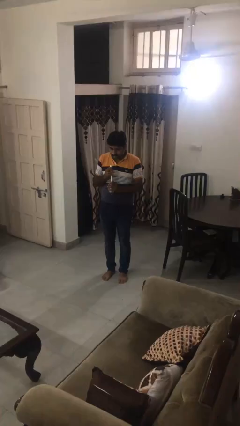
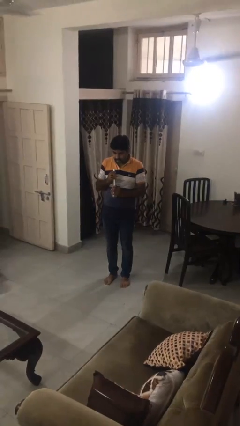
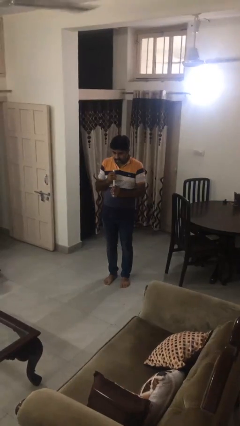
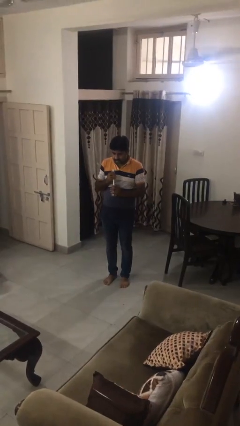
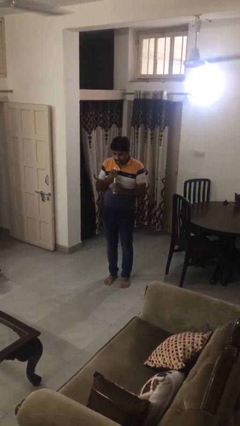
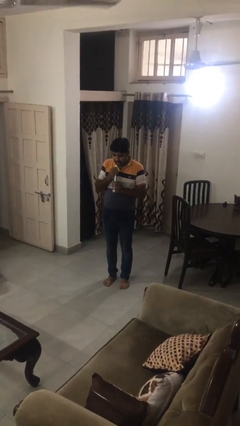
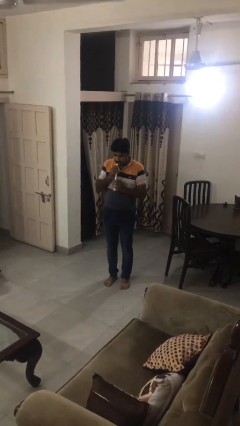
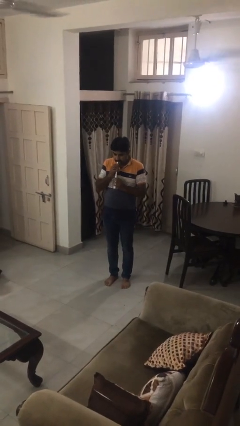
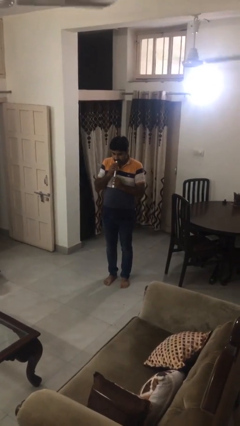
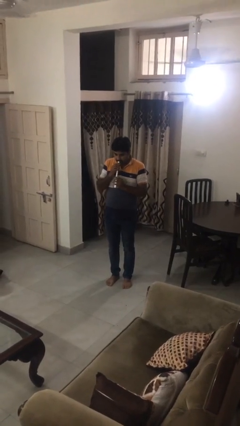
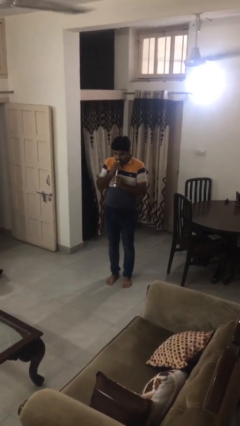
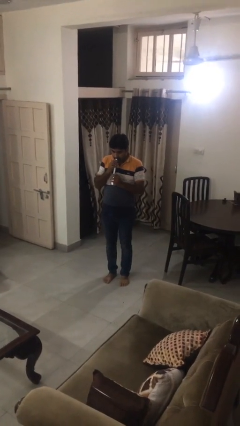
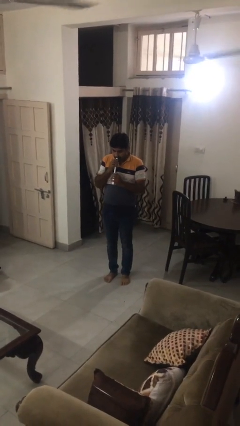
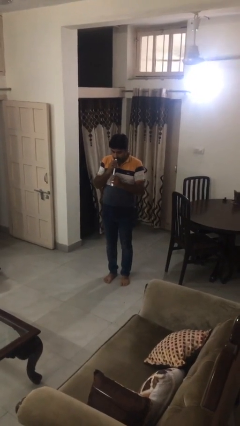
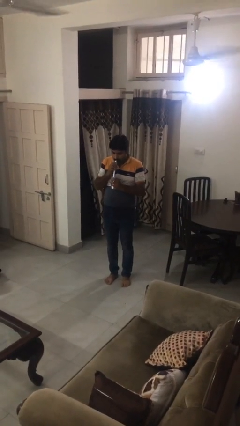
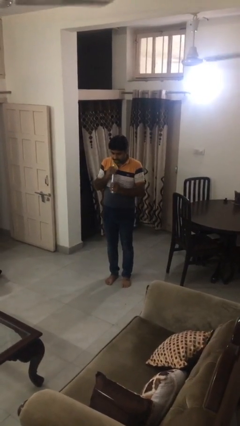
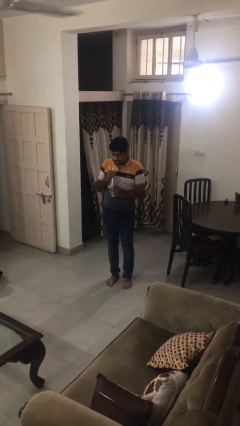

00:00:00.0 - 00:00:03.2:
person drinks from straw

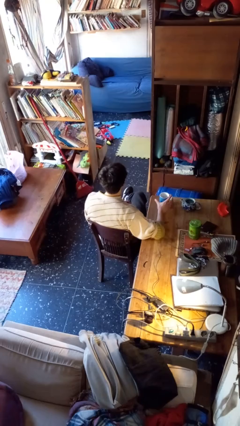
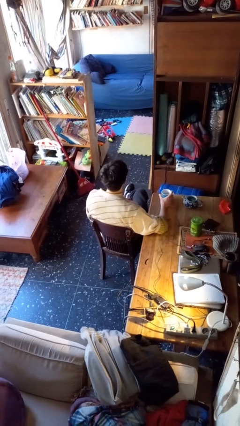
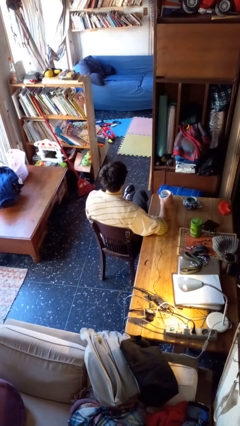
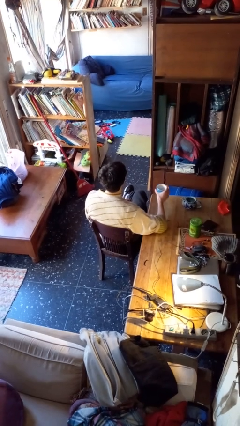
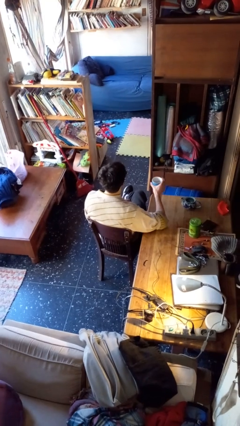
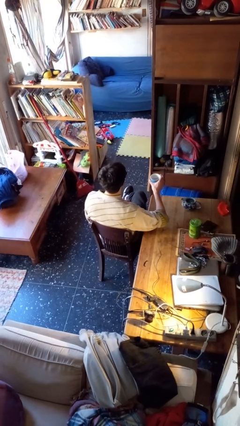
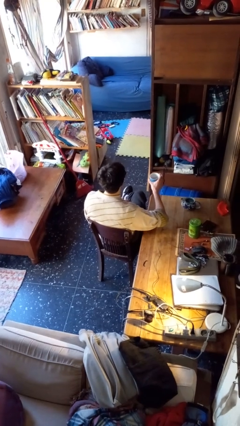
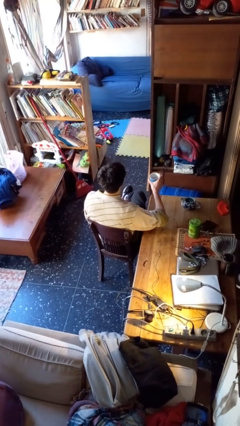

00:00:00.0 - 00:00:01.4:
person picks up object from table

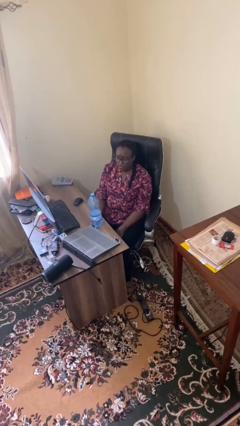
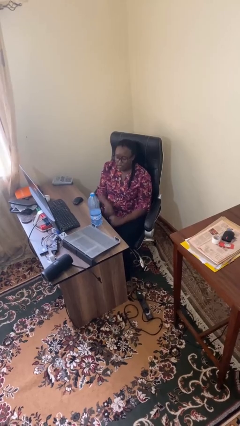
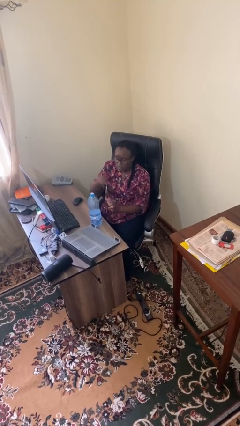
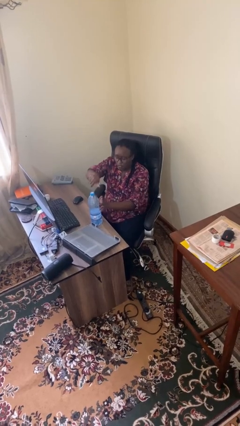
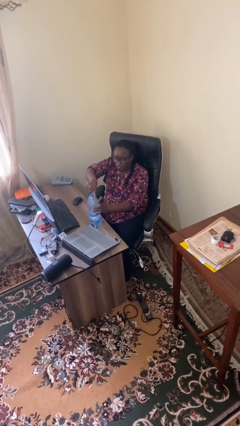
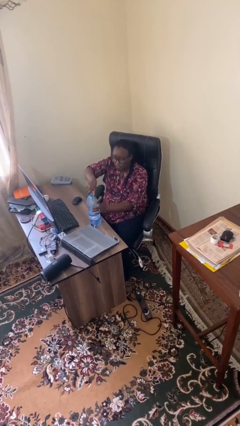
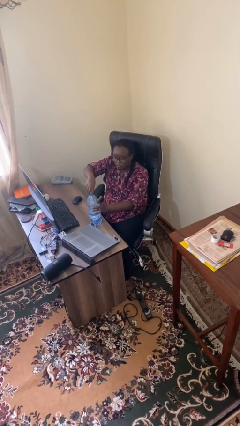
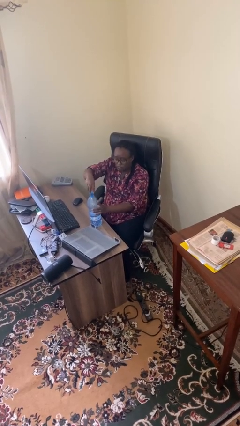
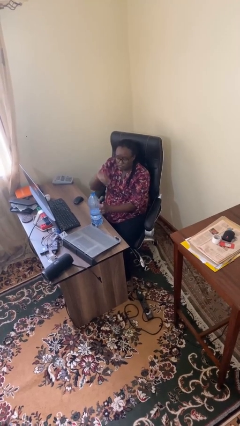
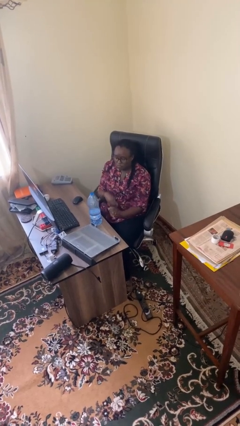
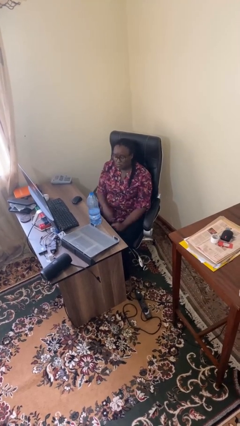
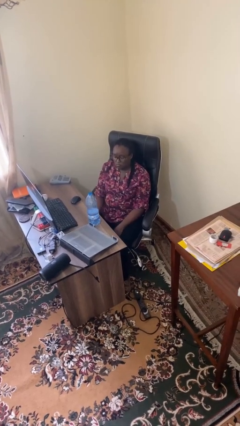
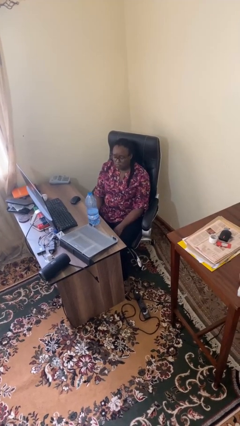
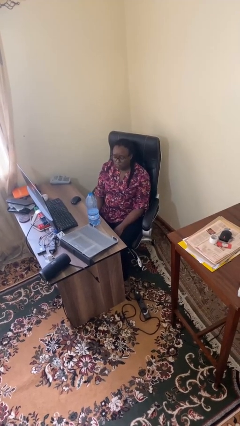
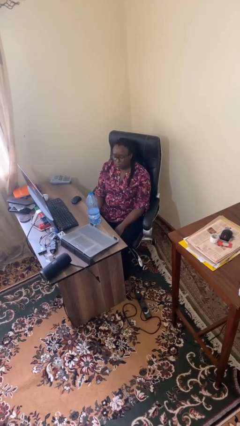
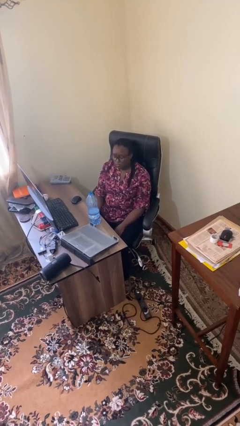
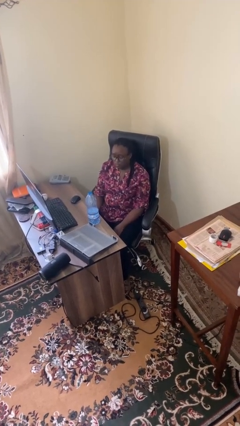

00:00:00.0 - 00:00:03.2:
person unscrews lid from bottle

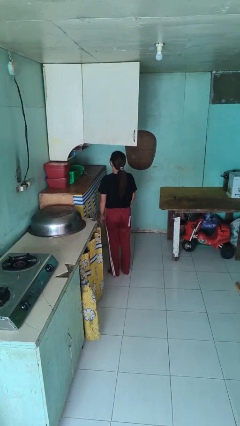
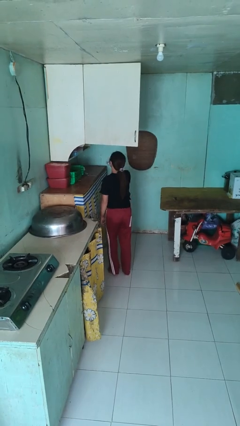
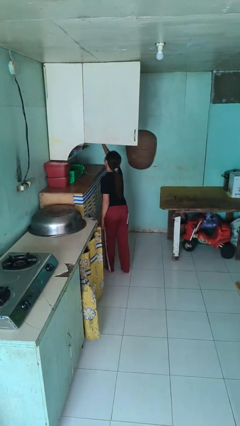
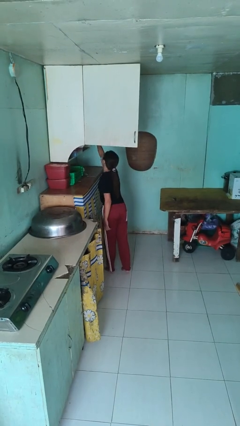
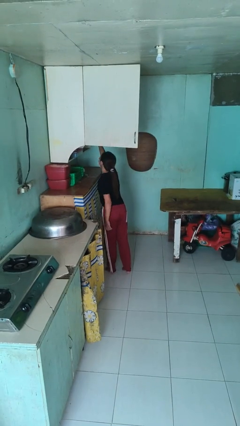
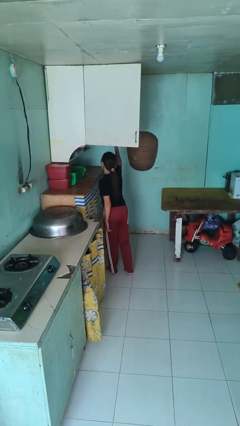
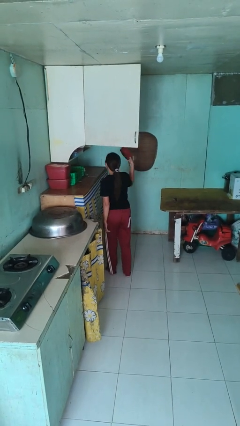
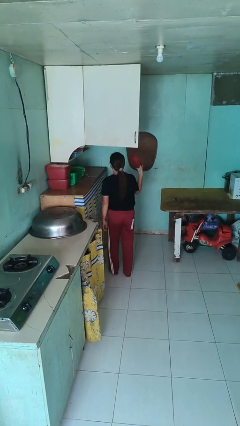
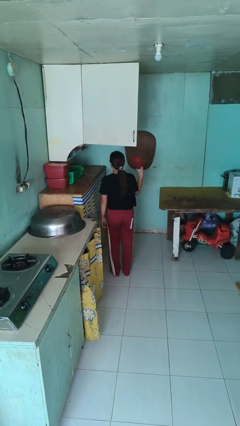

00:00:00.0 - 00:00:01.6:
person takes object from cabinet

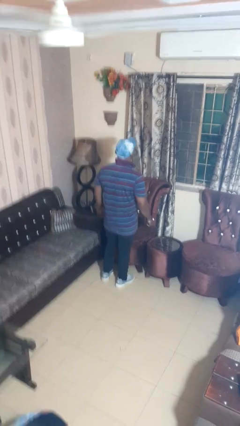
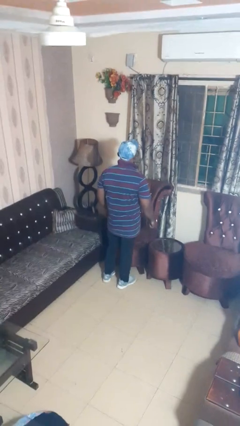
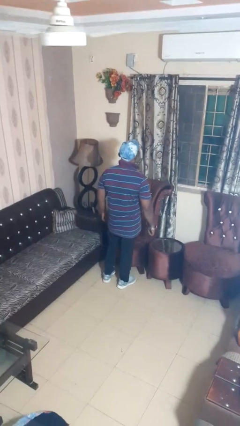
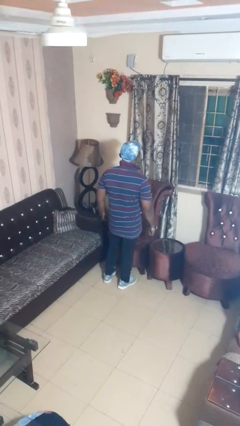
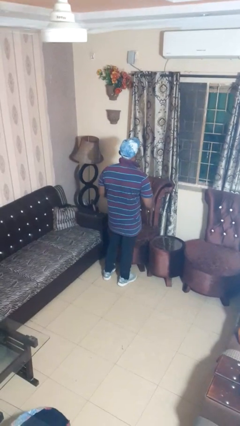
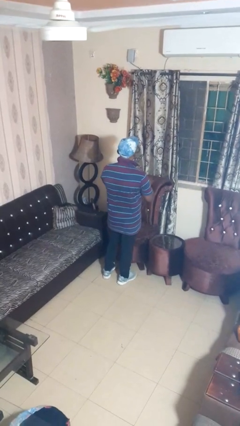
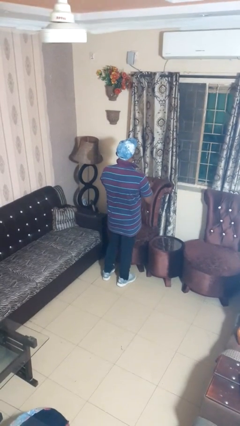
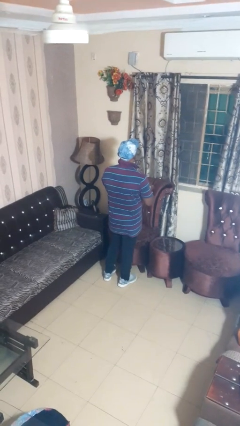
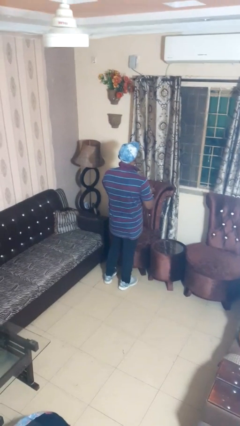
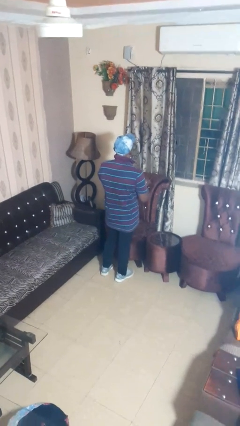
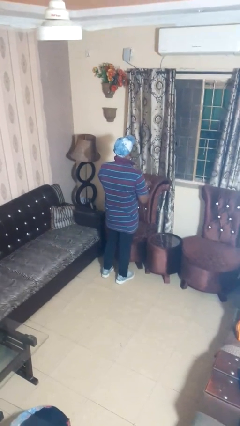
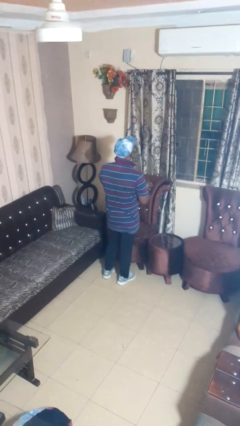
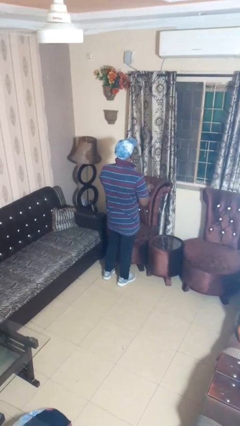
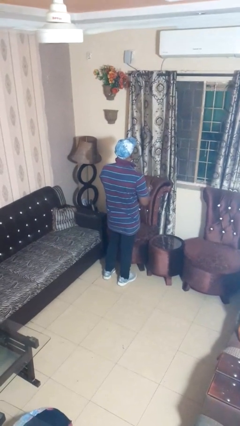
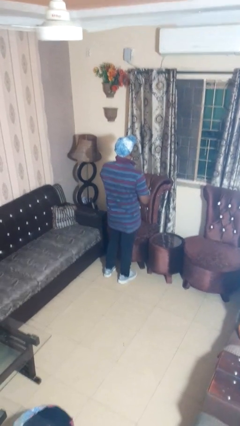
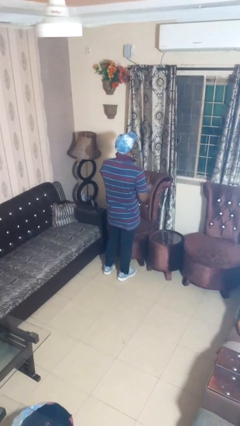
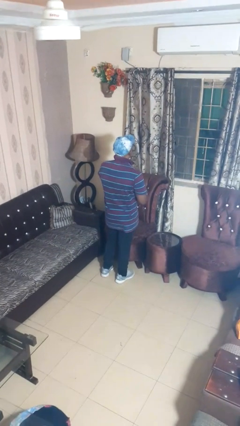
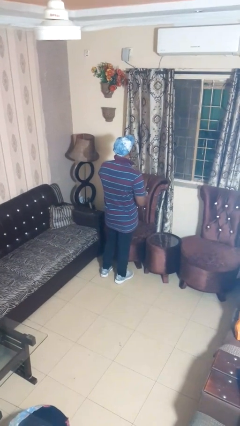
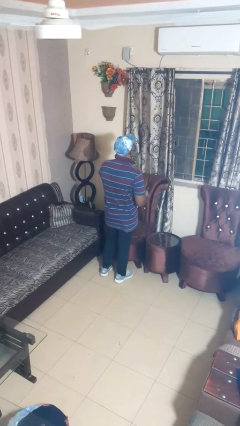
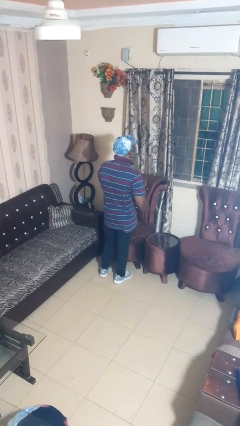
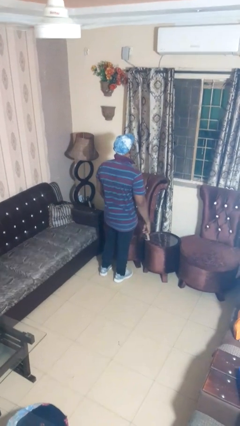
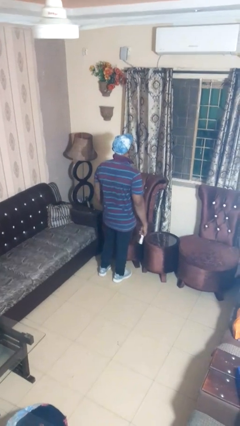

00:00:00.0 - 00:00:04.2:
person takes off wristwatch

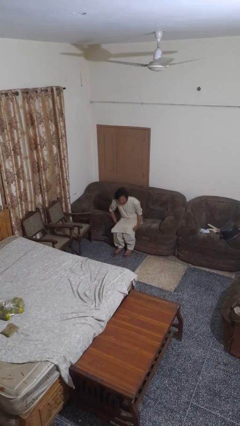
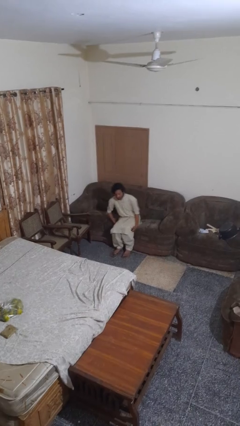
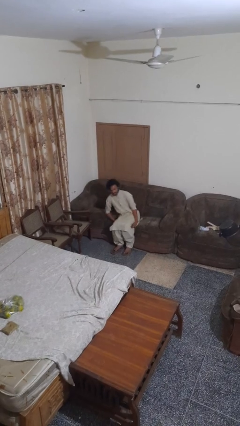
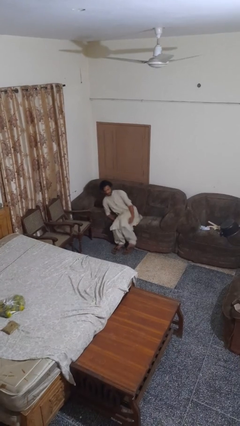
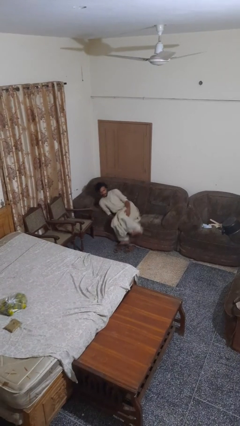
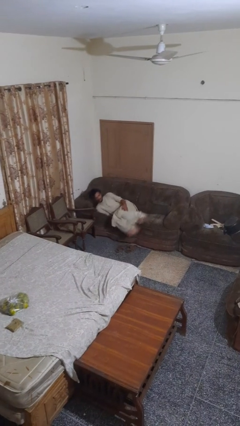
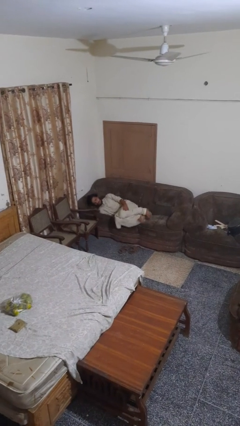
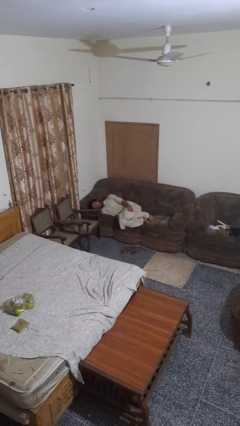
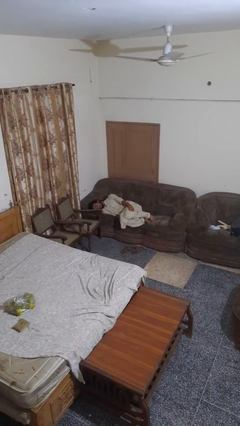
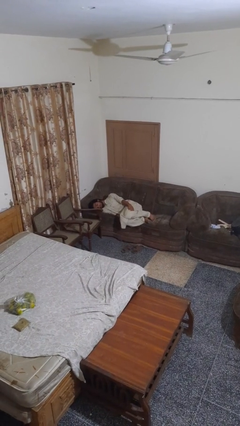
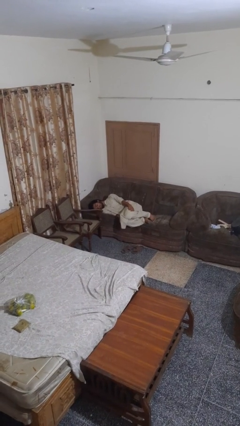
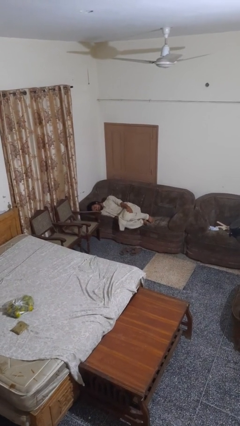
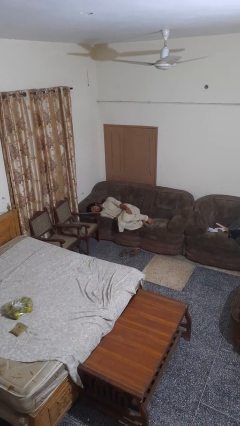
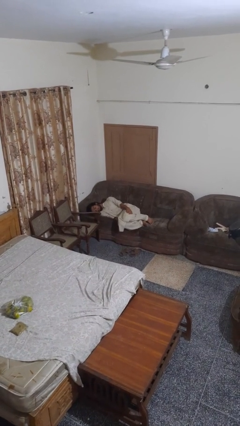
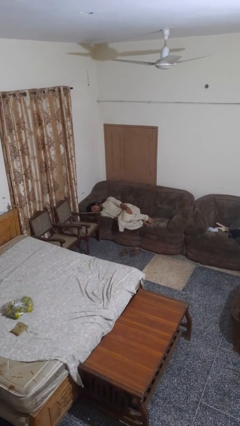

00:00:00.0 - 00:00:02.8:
person lies down on couch

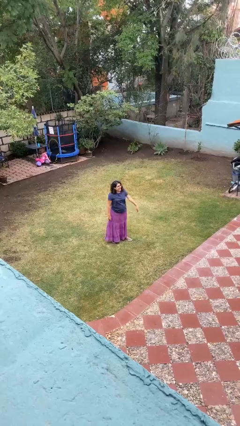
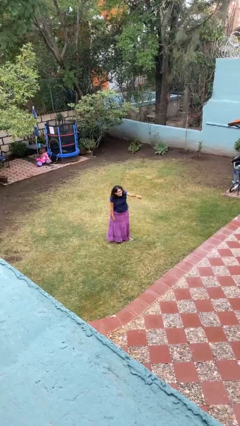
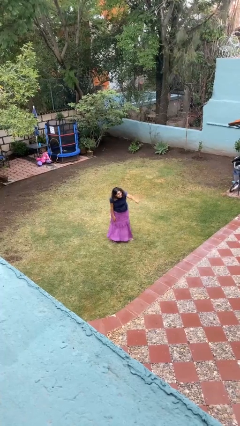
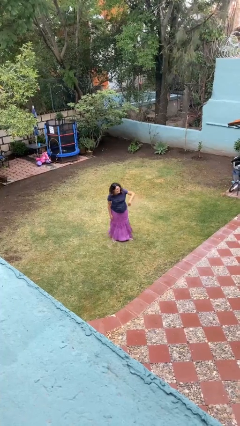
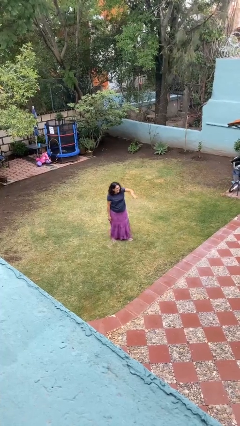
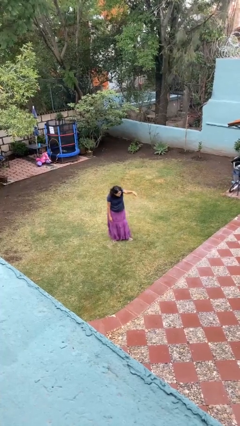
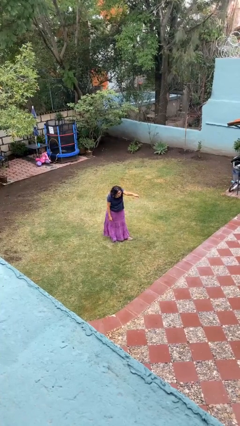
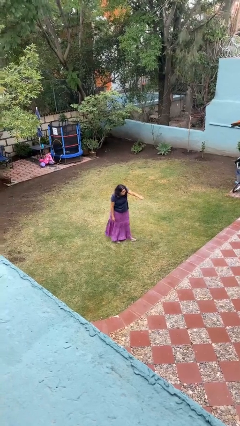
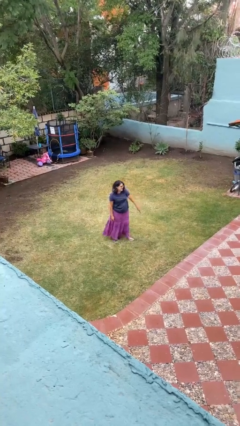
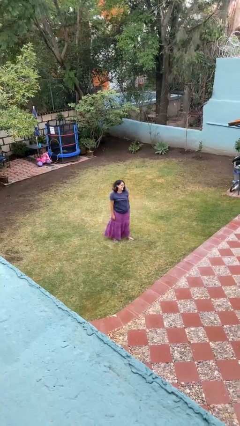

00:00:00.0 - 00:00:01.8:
person points at person
